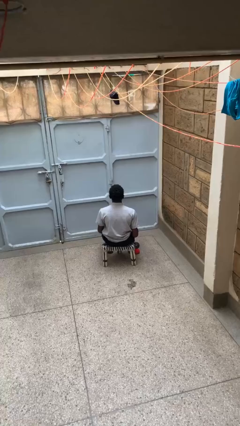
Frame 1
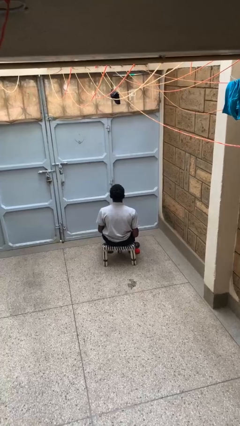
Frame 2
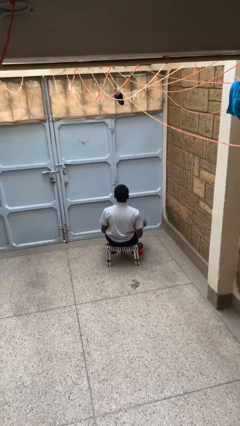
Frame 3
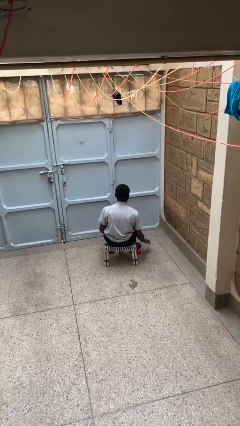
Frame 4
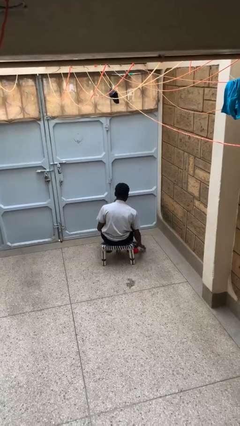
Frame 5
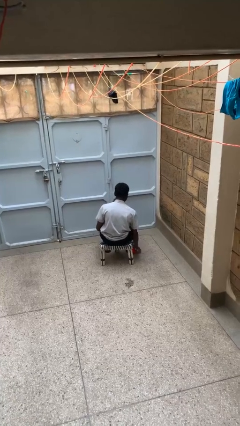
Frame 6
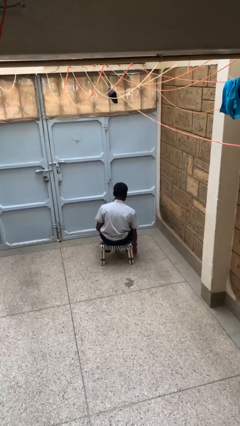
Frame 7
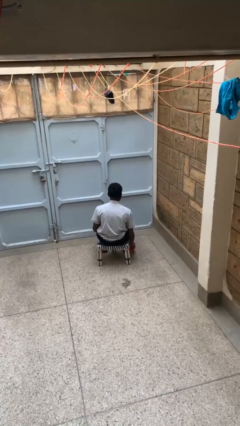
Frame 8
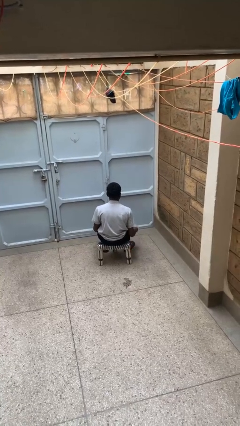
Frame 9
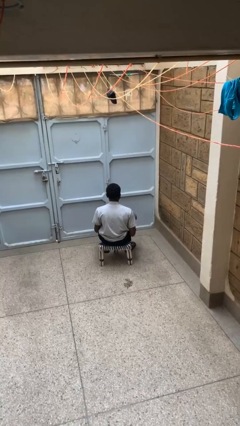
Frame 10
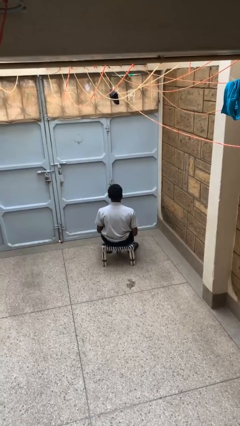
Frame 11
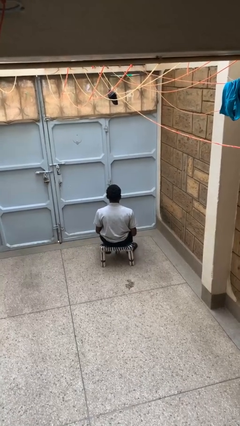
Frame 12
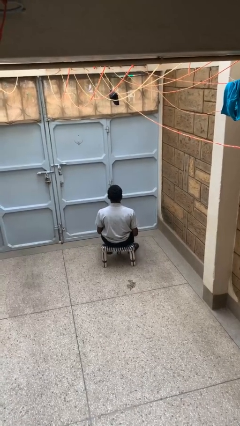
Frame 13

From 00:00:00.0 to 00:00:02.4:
person picks up object from floor

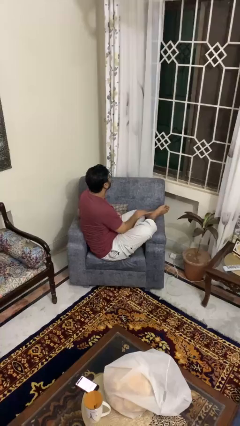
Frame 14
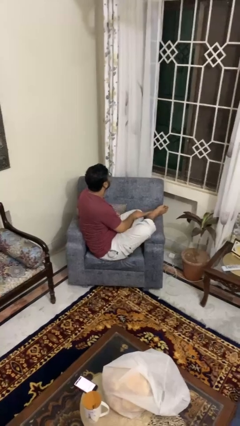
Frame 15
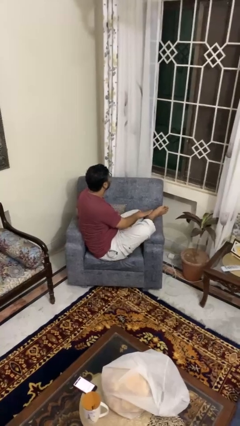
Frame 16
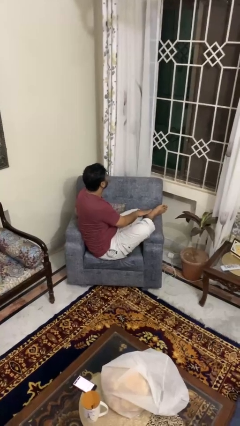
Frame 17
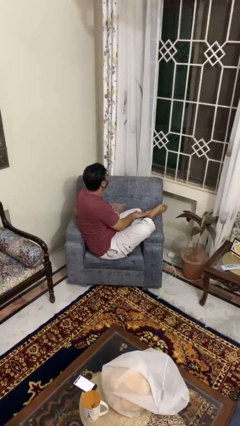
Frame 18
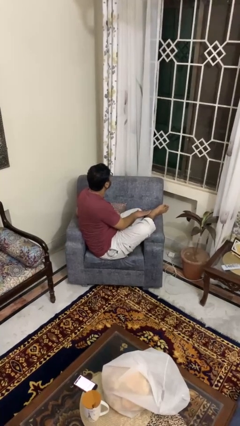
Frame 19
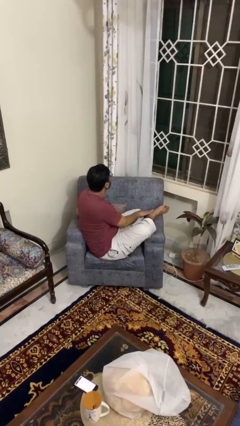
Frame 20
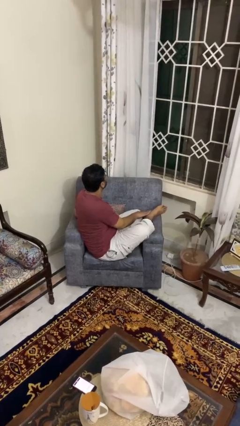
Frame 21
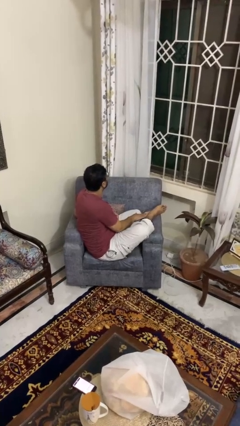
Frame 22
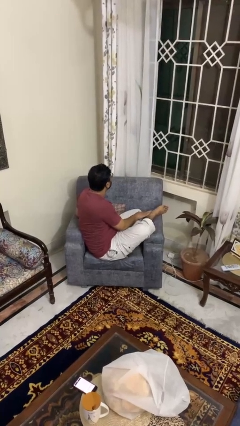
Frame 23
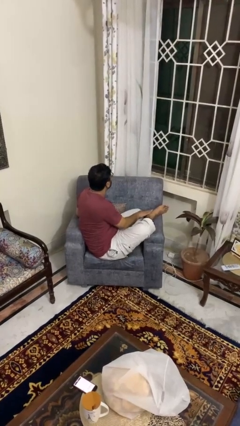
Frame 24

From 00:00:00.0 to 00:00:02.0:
person rubs foot

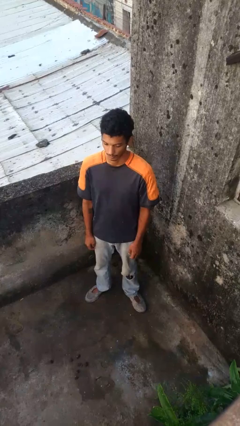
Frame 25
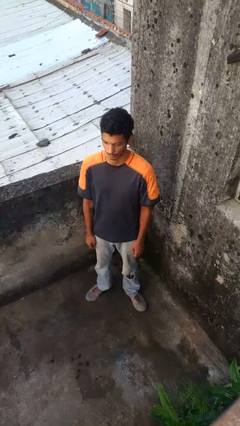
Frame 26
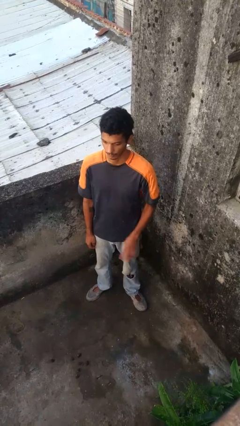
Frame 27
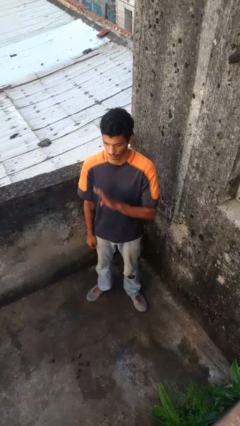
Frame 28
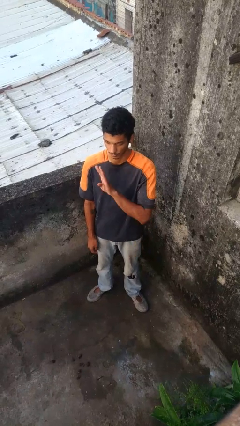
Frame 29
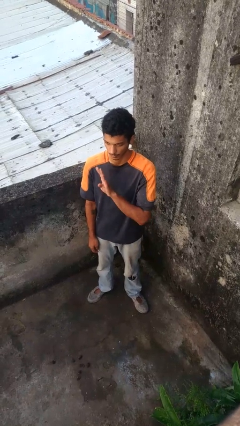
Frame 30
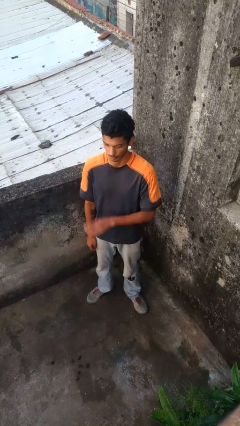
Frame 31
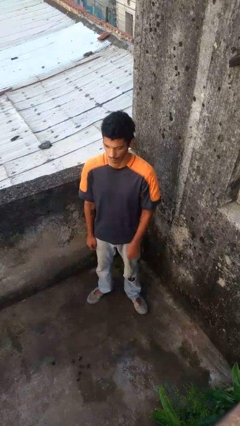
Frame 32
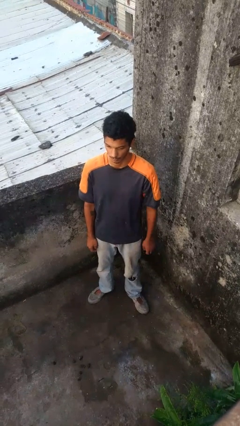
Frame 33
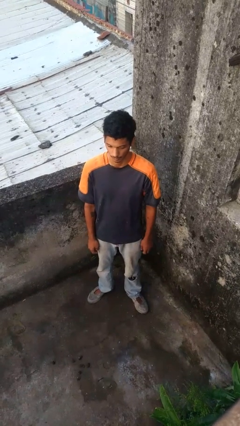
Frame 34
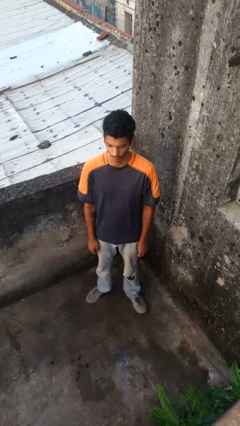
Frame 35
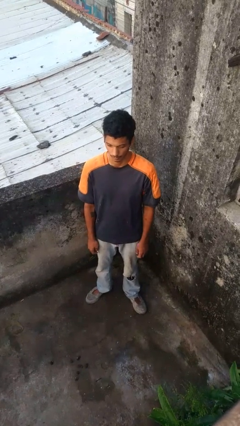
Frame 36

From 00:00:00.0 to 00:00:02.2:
person gestures number four

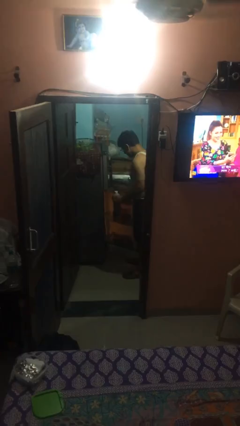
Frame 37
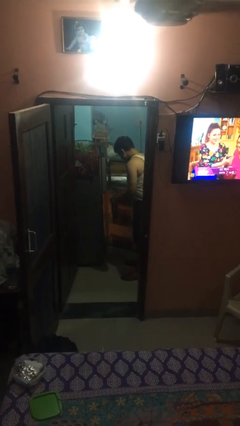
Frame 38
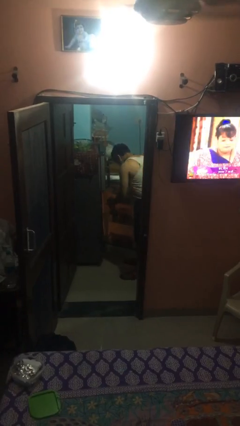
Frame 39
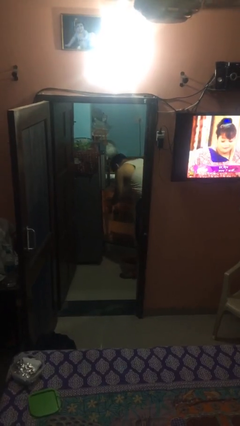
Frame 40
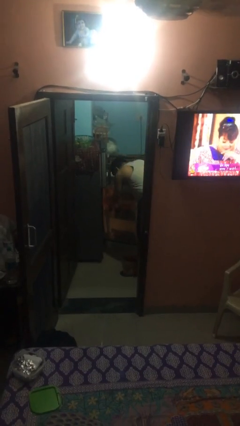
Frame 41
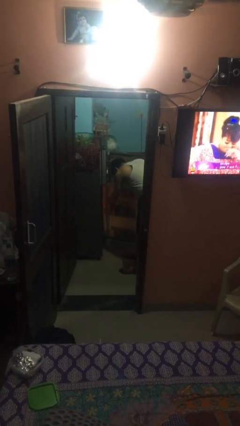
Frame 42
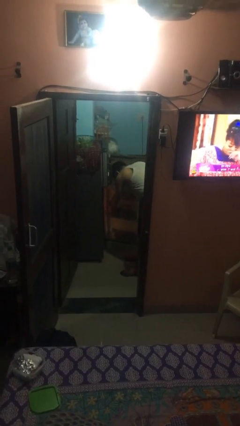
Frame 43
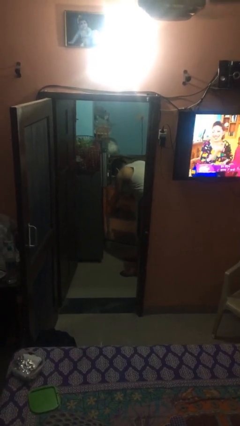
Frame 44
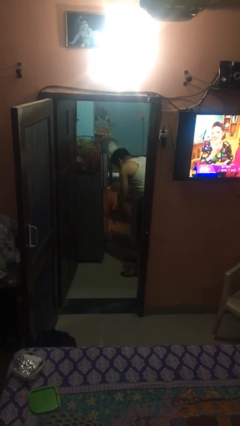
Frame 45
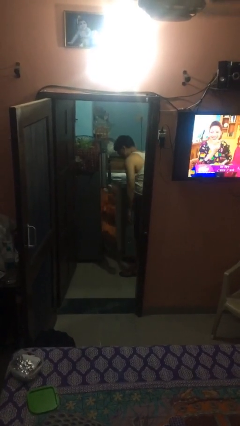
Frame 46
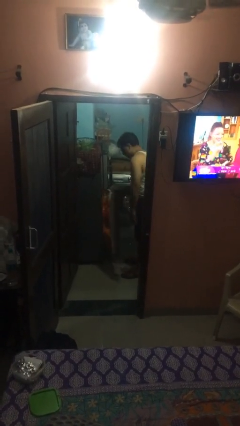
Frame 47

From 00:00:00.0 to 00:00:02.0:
person puts object into refrigerator

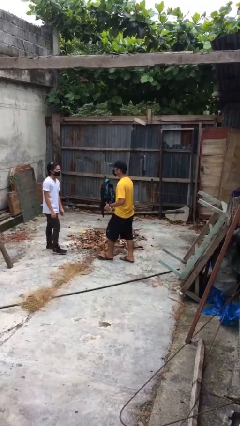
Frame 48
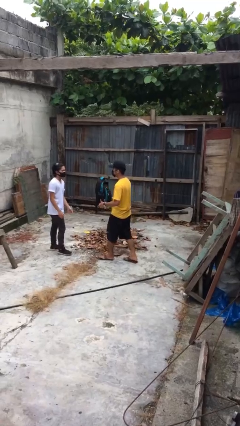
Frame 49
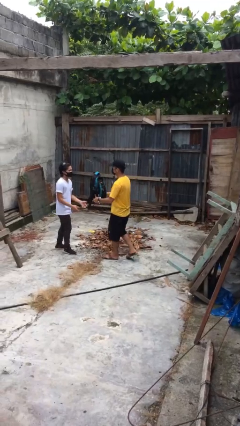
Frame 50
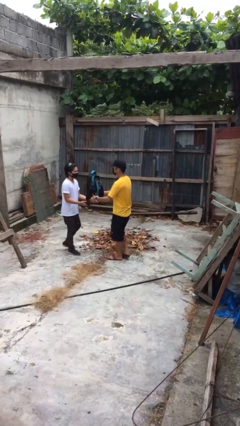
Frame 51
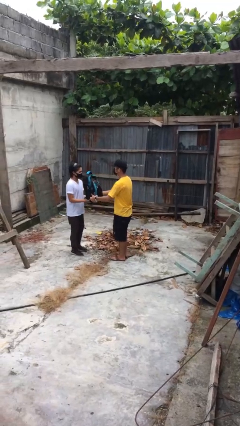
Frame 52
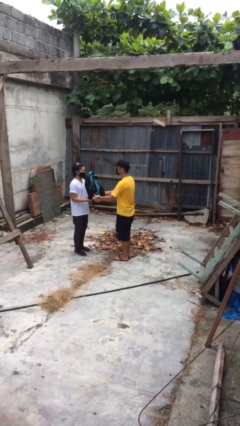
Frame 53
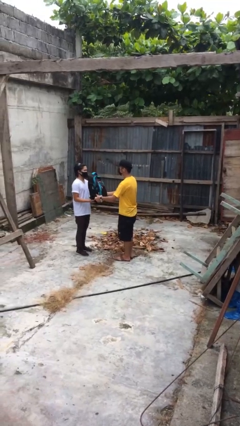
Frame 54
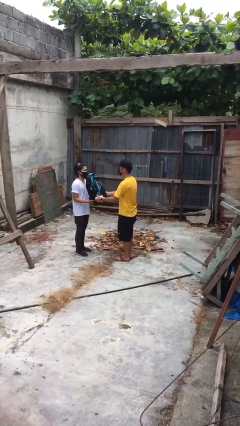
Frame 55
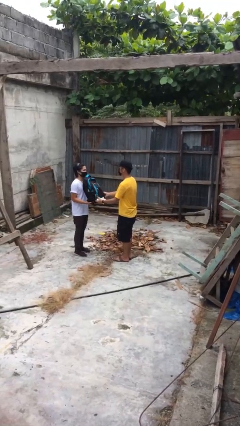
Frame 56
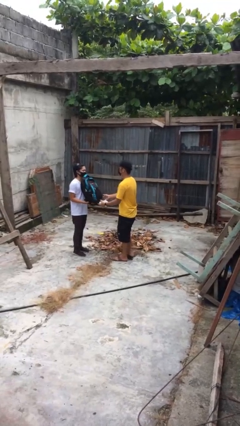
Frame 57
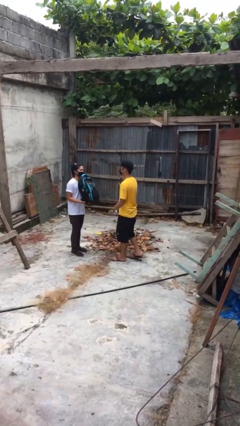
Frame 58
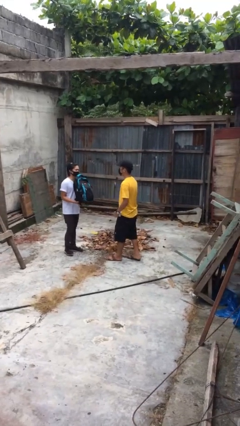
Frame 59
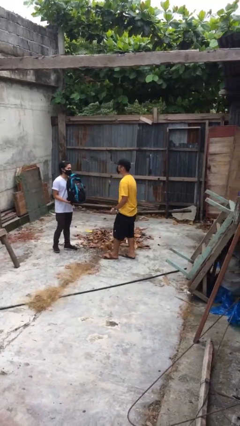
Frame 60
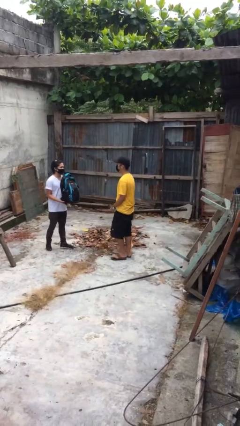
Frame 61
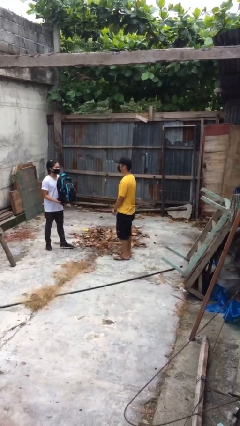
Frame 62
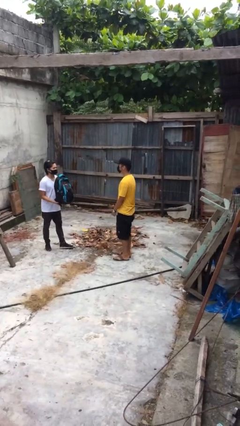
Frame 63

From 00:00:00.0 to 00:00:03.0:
person transfers object to person

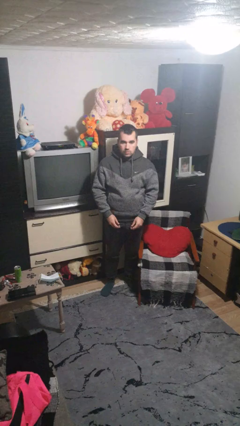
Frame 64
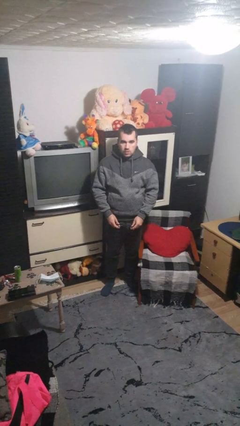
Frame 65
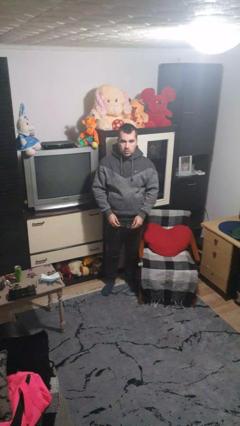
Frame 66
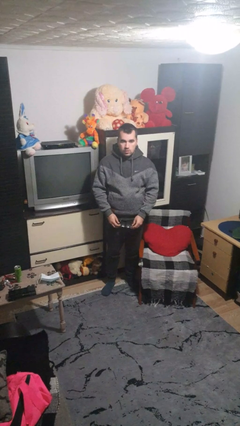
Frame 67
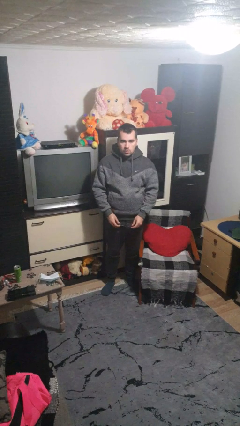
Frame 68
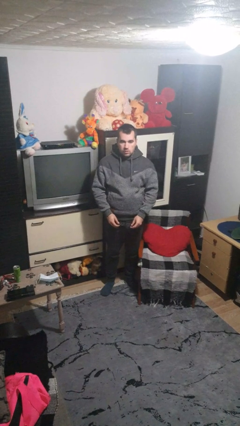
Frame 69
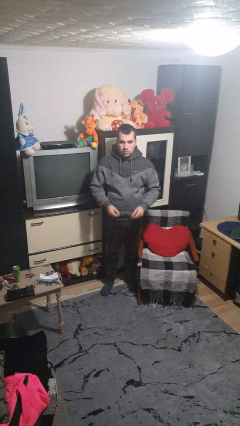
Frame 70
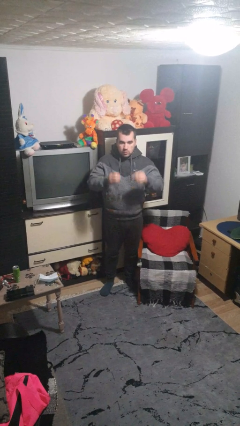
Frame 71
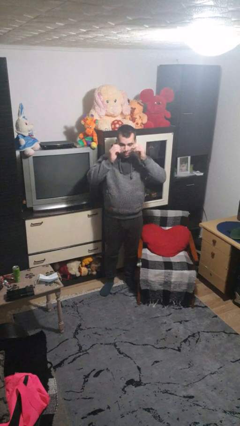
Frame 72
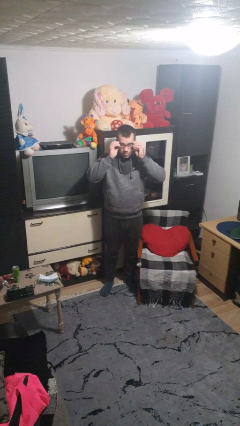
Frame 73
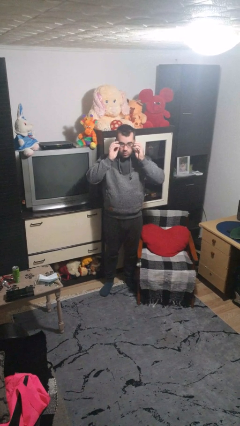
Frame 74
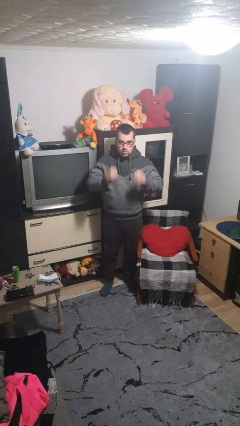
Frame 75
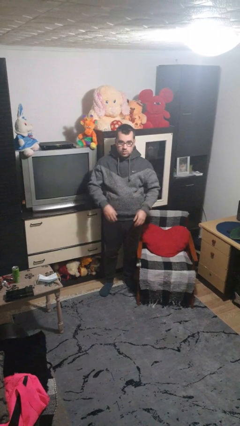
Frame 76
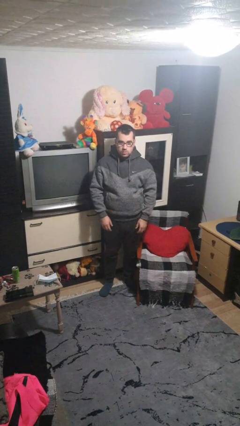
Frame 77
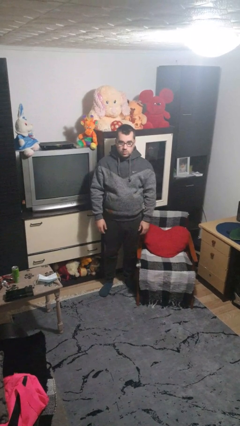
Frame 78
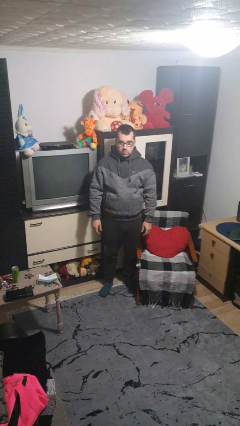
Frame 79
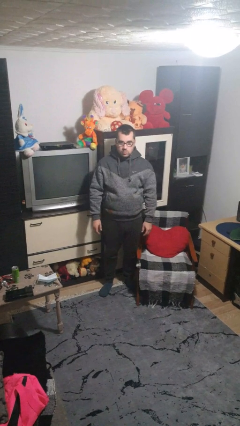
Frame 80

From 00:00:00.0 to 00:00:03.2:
person puts on glasses

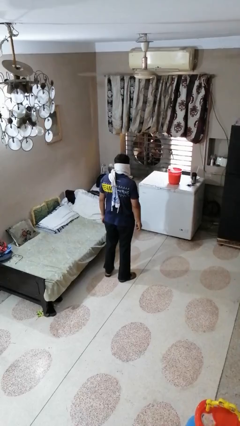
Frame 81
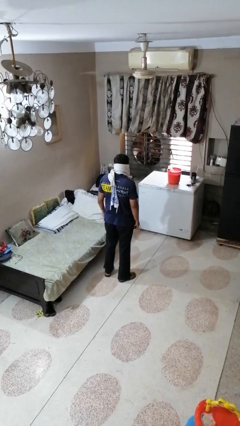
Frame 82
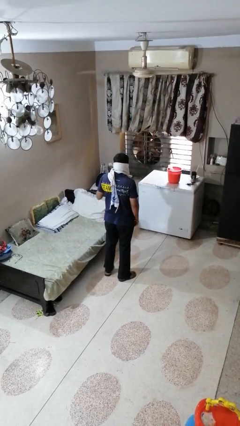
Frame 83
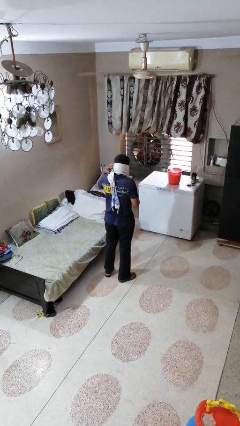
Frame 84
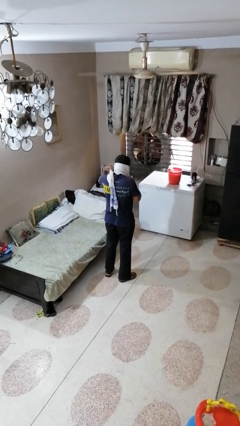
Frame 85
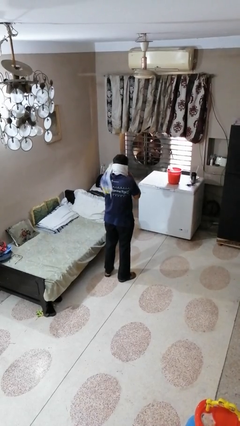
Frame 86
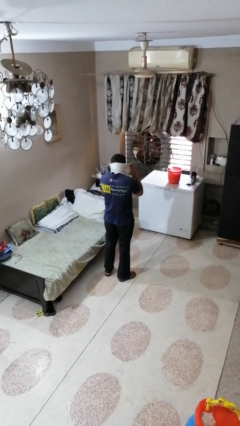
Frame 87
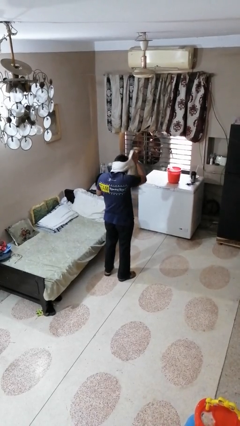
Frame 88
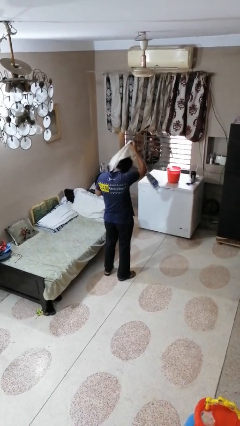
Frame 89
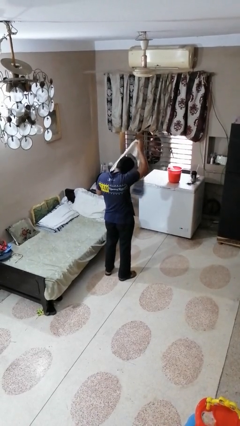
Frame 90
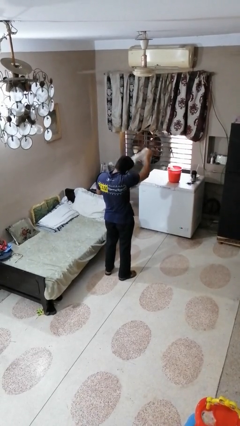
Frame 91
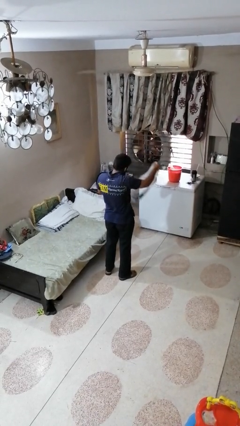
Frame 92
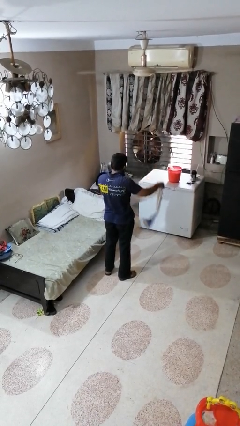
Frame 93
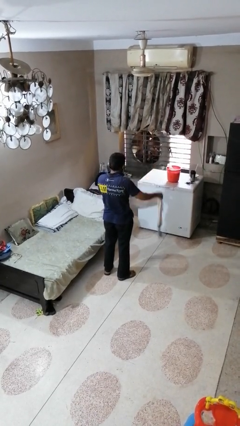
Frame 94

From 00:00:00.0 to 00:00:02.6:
person takes off scarf
